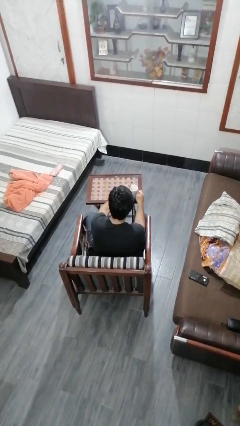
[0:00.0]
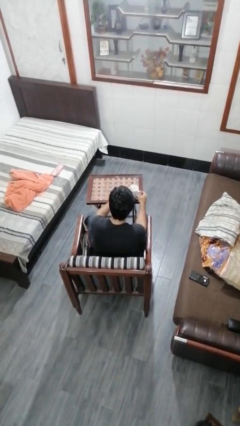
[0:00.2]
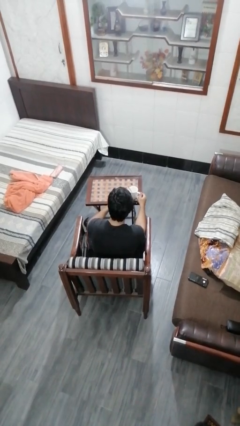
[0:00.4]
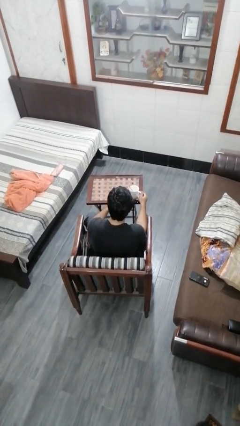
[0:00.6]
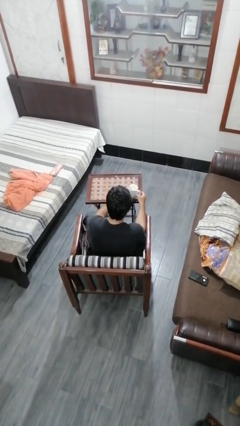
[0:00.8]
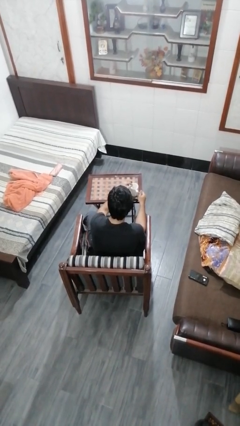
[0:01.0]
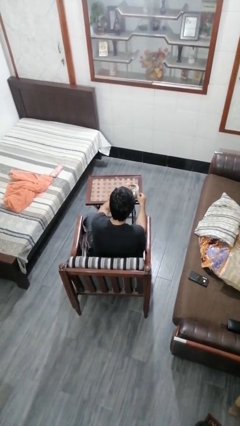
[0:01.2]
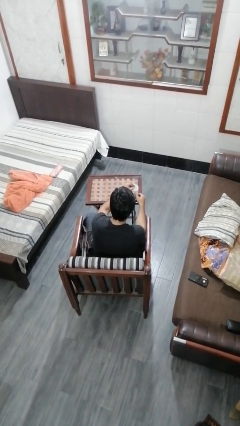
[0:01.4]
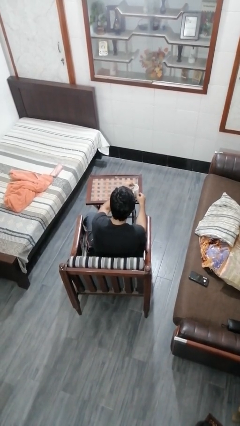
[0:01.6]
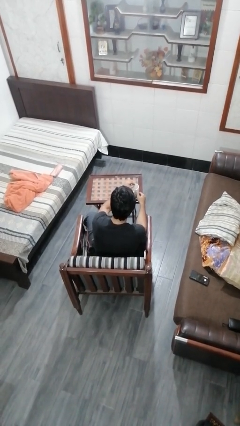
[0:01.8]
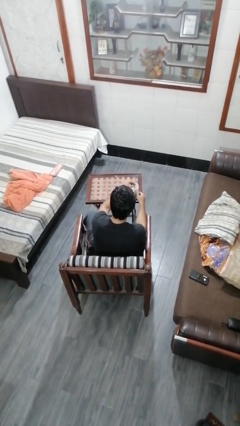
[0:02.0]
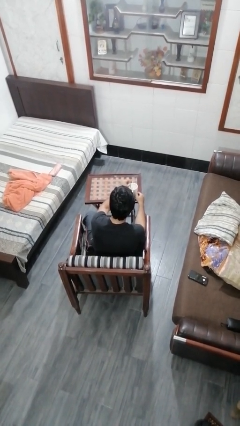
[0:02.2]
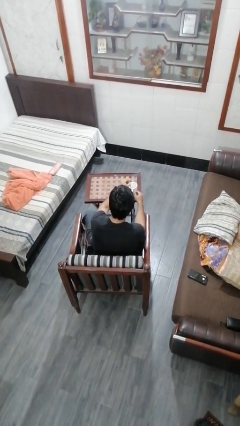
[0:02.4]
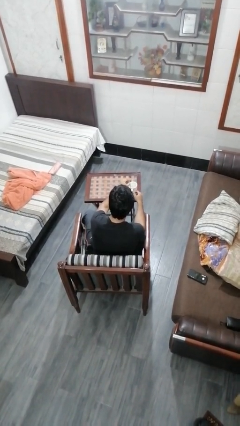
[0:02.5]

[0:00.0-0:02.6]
person stirs mug

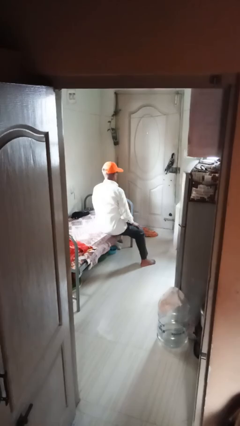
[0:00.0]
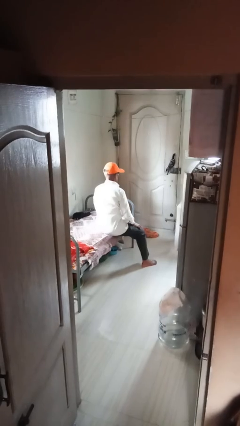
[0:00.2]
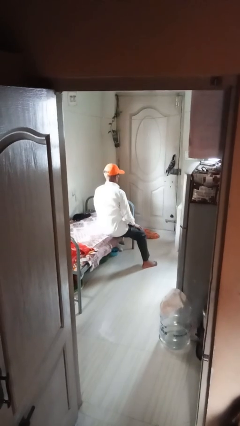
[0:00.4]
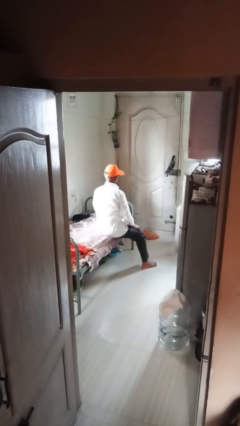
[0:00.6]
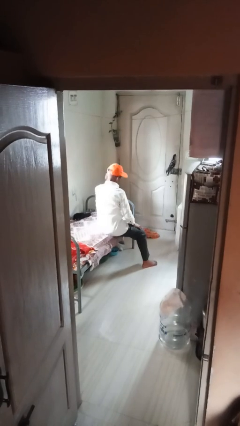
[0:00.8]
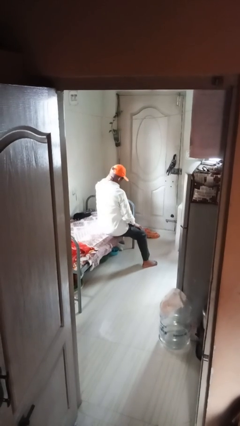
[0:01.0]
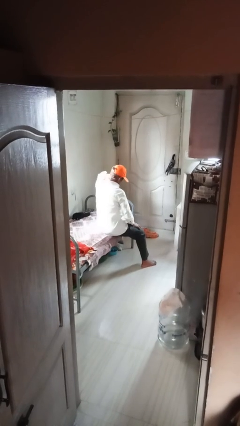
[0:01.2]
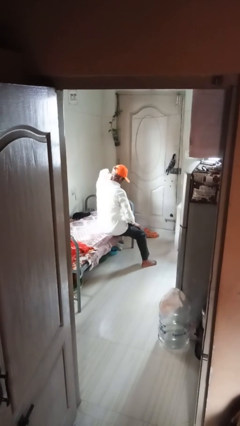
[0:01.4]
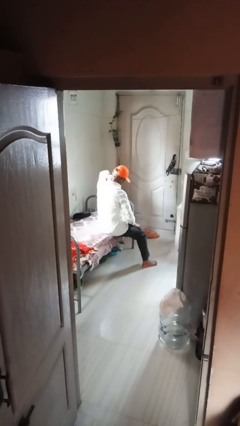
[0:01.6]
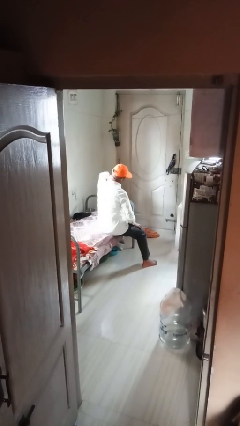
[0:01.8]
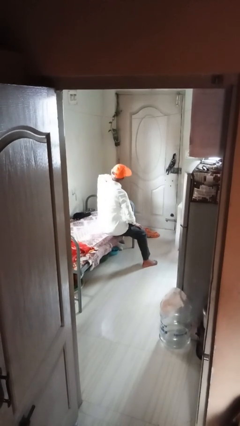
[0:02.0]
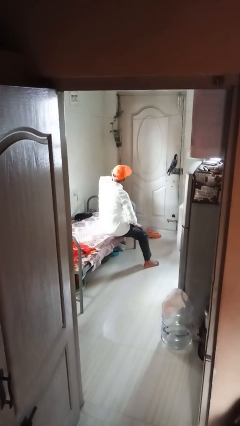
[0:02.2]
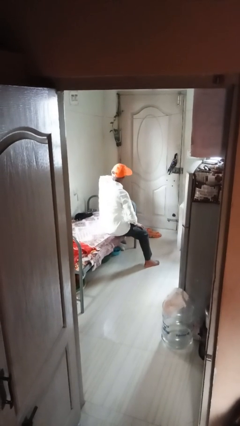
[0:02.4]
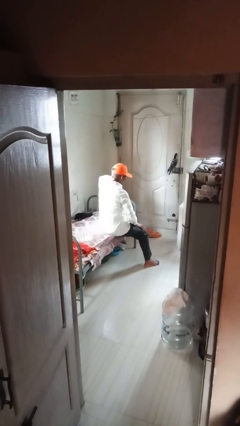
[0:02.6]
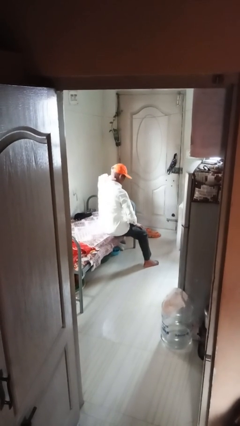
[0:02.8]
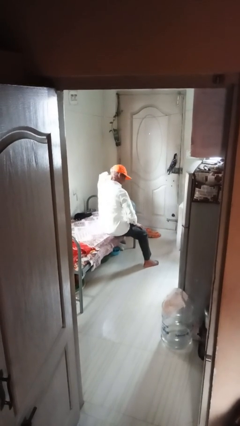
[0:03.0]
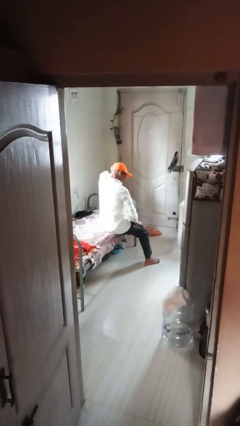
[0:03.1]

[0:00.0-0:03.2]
person rubs neck

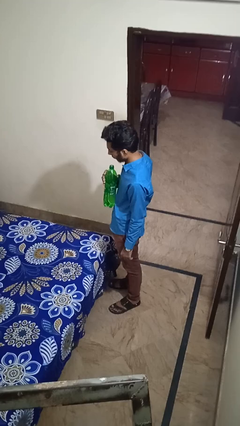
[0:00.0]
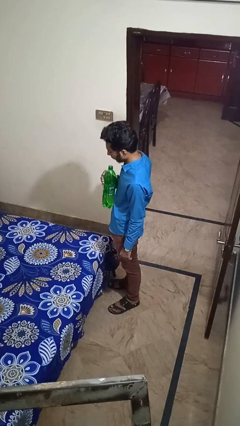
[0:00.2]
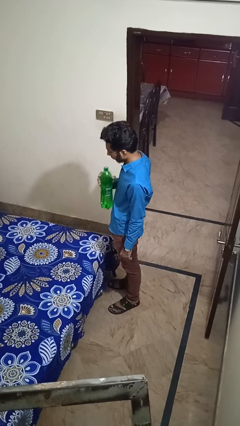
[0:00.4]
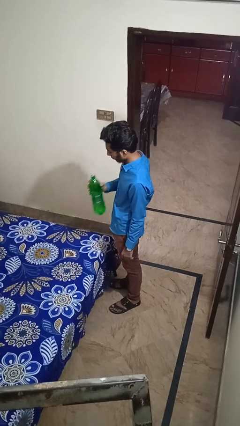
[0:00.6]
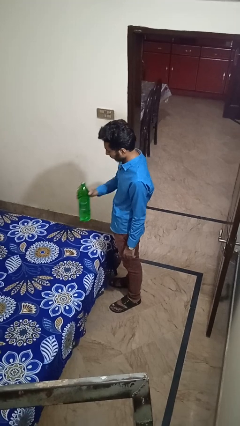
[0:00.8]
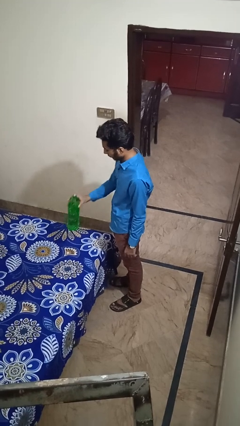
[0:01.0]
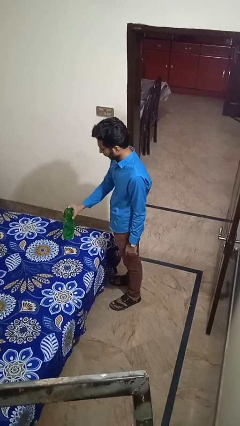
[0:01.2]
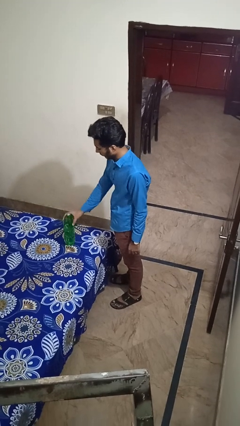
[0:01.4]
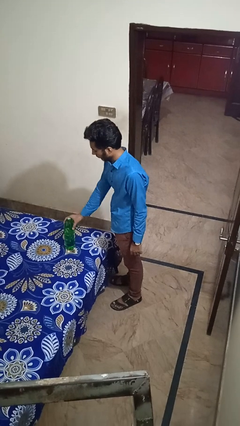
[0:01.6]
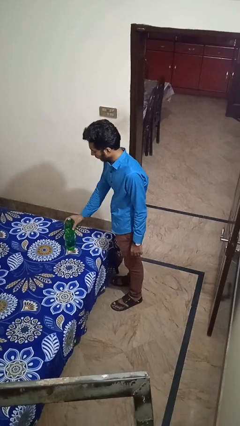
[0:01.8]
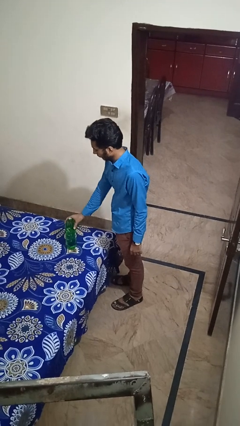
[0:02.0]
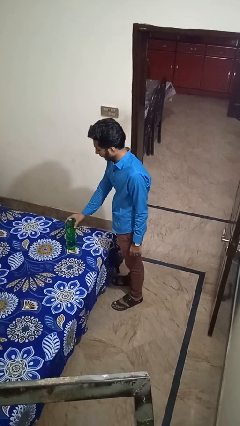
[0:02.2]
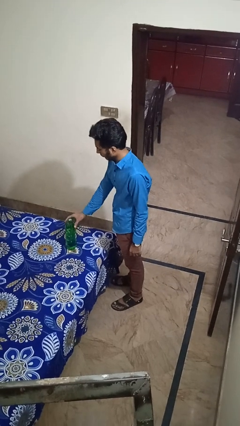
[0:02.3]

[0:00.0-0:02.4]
person puts down object on bed

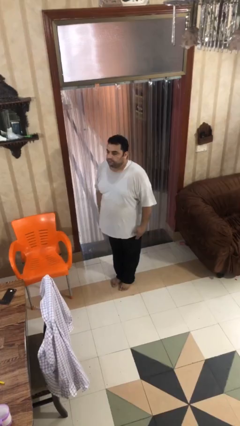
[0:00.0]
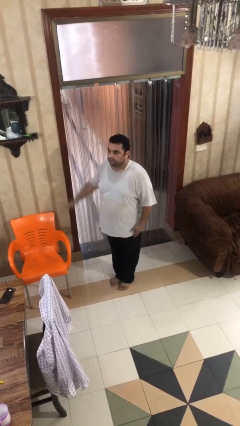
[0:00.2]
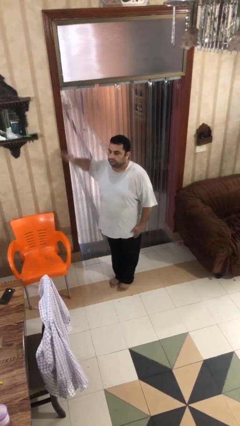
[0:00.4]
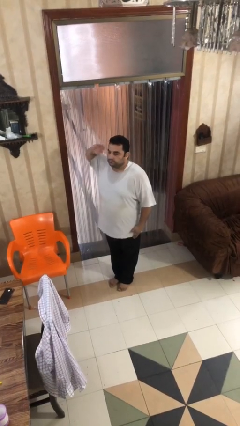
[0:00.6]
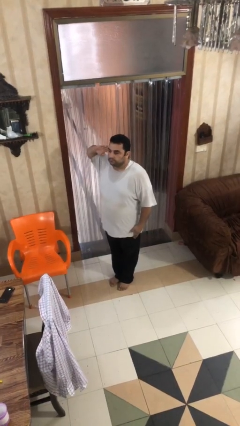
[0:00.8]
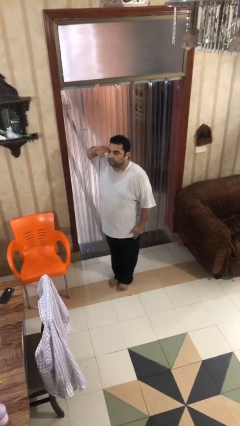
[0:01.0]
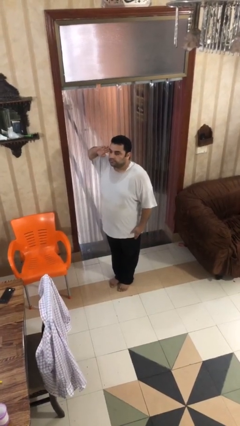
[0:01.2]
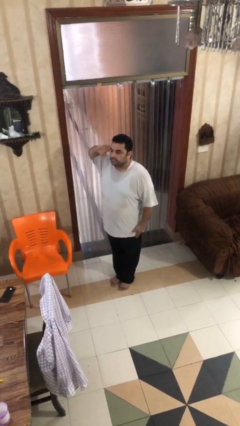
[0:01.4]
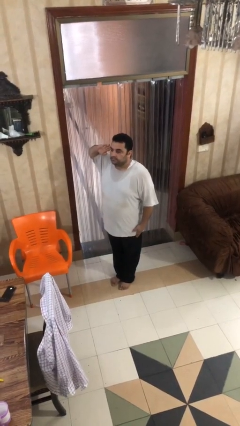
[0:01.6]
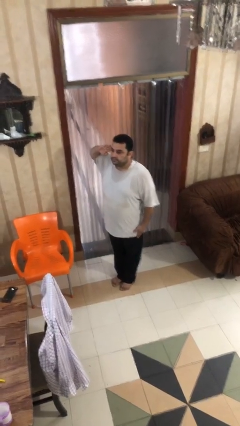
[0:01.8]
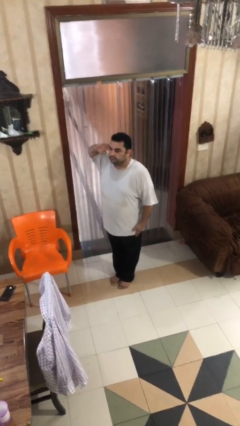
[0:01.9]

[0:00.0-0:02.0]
person salutes

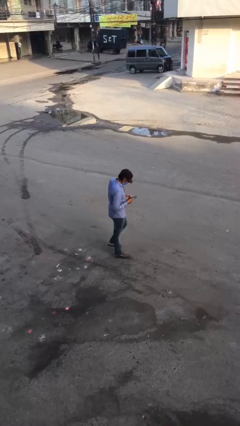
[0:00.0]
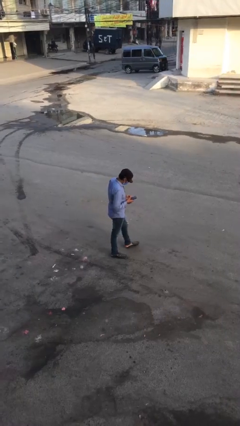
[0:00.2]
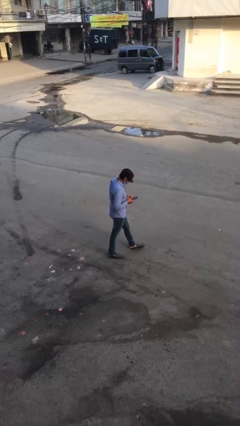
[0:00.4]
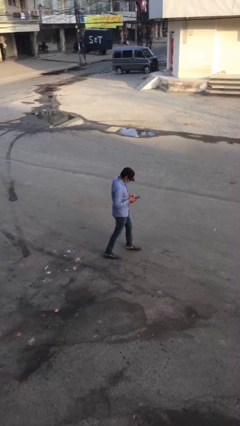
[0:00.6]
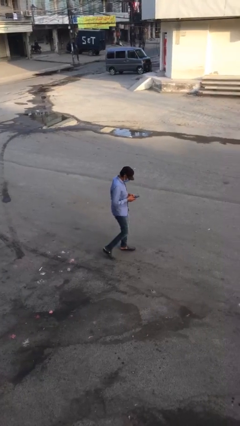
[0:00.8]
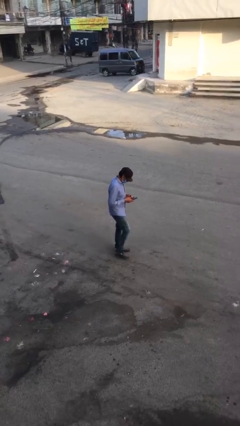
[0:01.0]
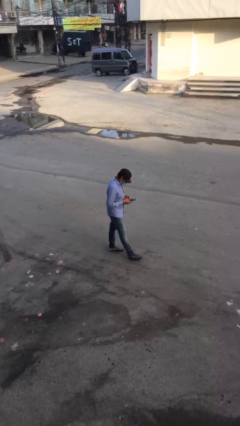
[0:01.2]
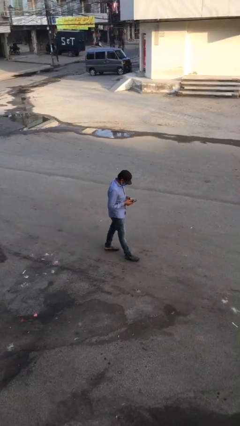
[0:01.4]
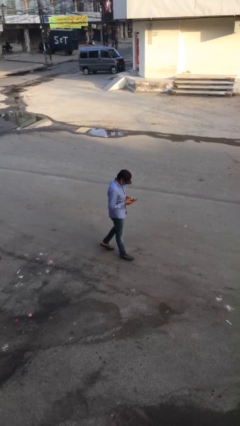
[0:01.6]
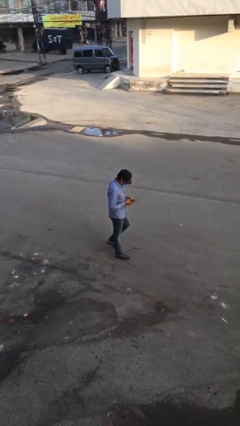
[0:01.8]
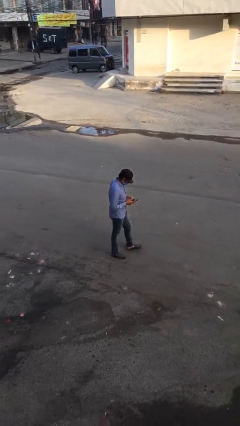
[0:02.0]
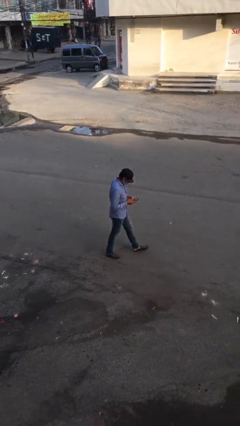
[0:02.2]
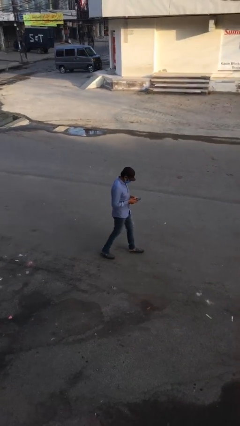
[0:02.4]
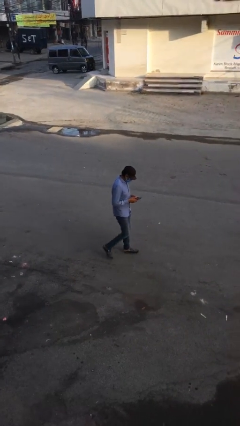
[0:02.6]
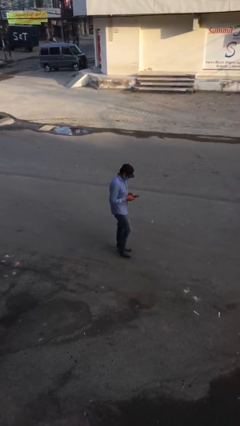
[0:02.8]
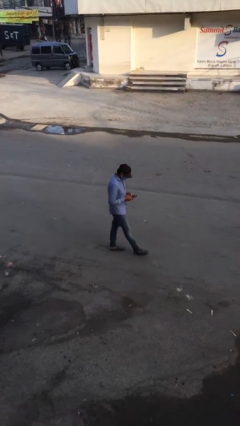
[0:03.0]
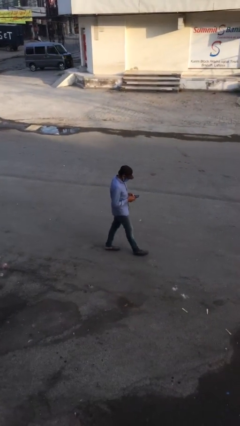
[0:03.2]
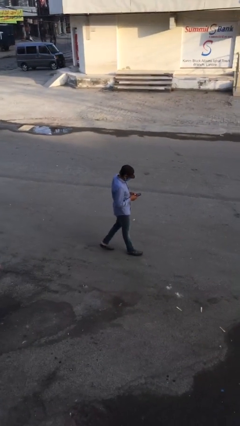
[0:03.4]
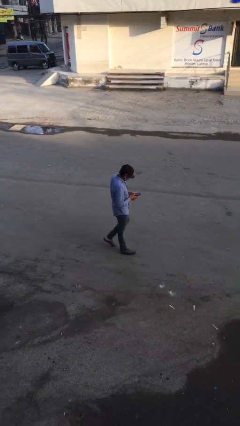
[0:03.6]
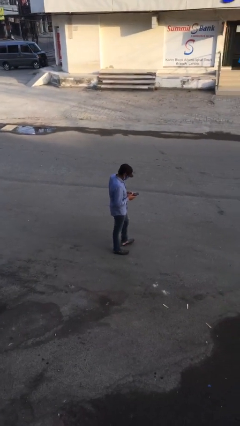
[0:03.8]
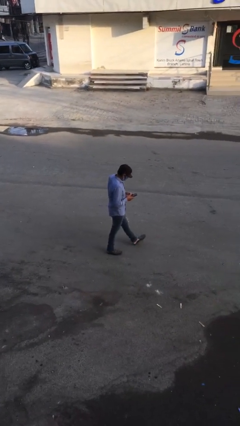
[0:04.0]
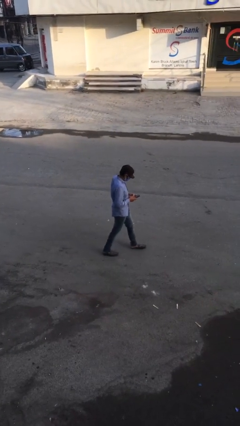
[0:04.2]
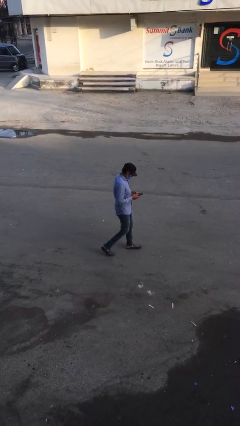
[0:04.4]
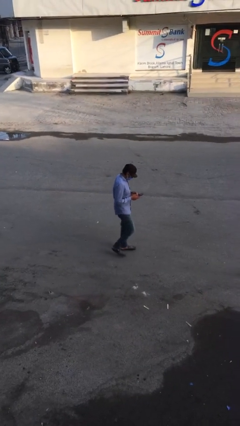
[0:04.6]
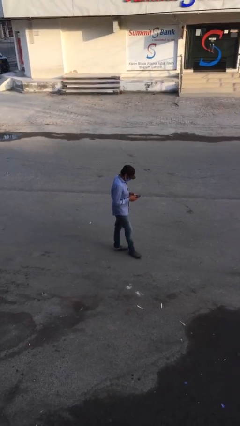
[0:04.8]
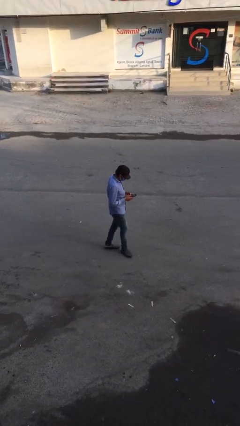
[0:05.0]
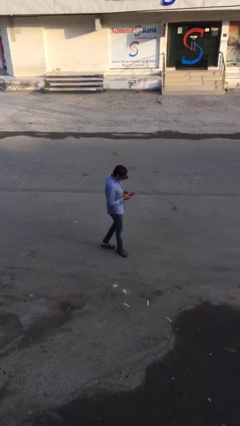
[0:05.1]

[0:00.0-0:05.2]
person texts on phone

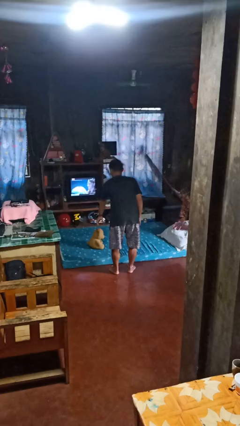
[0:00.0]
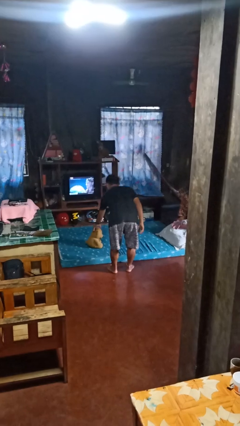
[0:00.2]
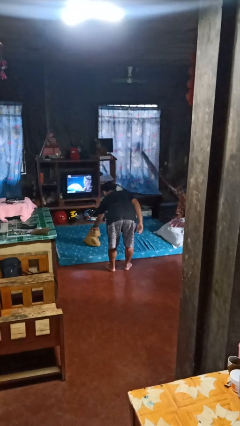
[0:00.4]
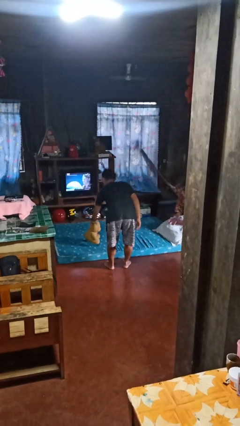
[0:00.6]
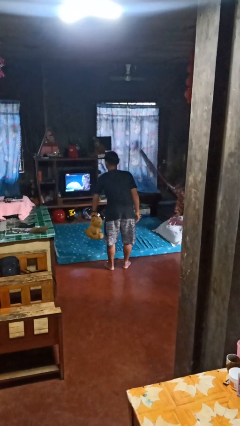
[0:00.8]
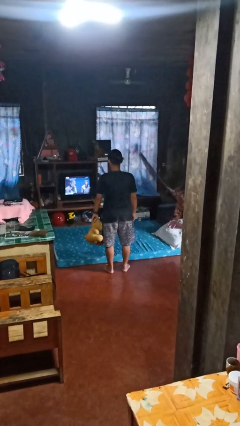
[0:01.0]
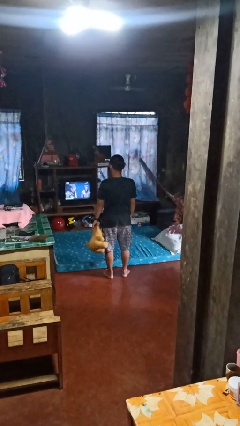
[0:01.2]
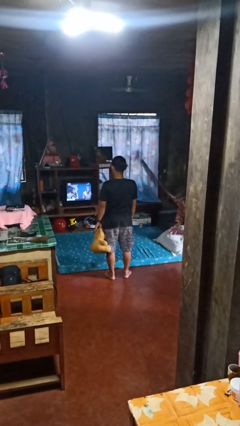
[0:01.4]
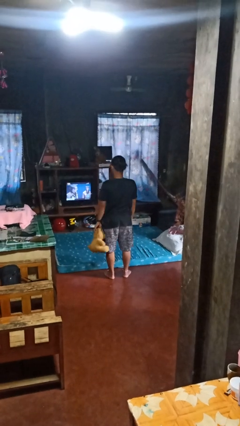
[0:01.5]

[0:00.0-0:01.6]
person picks up object from bed

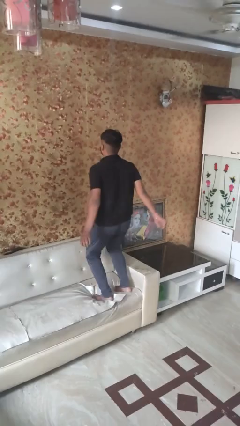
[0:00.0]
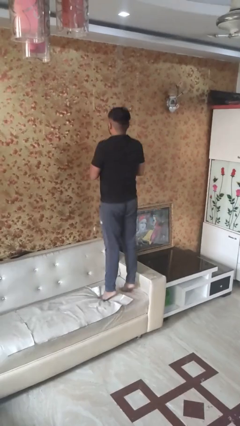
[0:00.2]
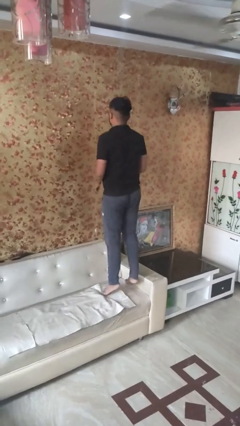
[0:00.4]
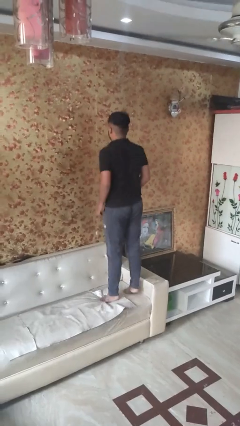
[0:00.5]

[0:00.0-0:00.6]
person jumps on bed
